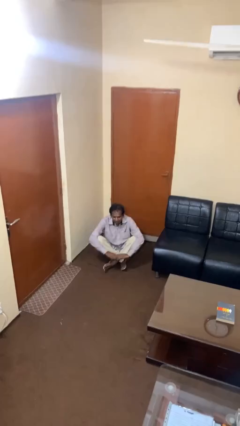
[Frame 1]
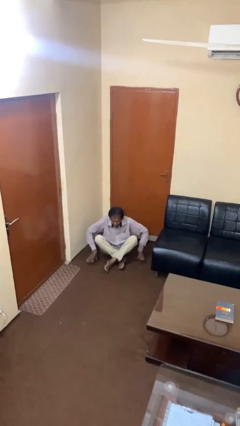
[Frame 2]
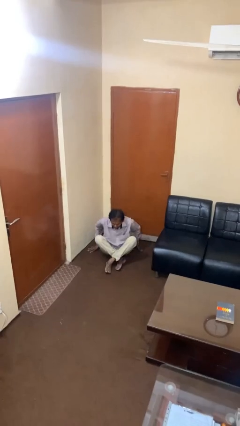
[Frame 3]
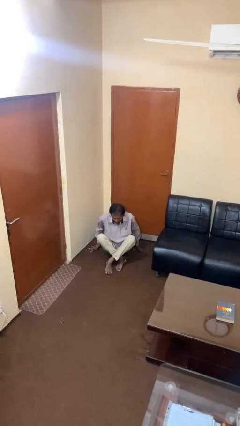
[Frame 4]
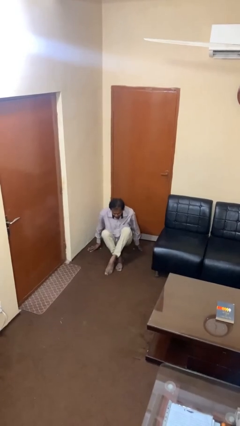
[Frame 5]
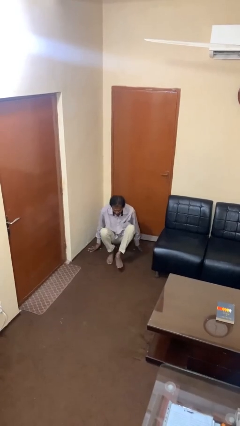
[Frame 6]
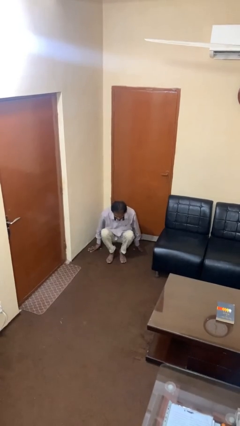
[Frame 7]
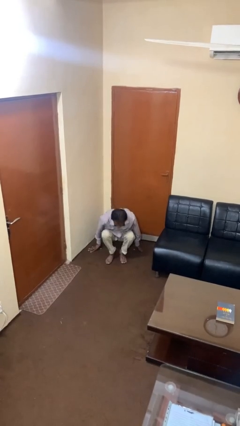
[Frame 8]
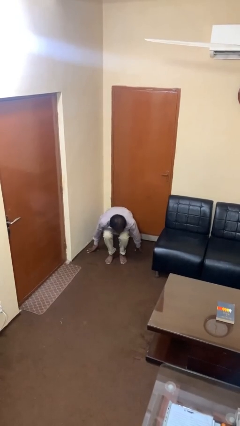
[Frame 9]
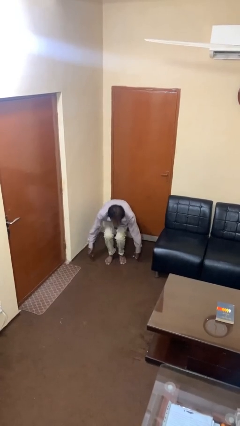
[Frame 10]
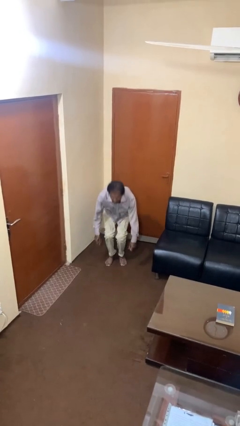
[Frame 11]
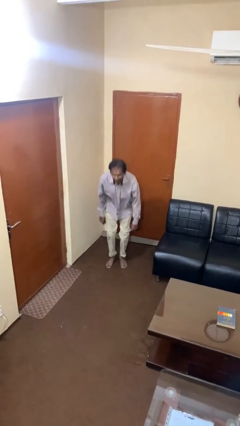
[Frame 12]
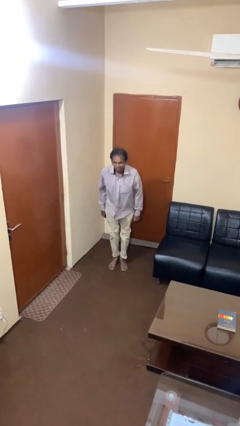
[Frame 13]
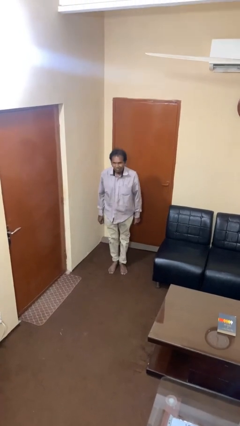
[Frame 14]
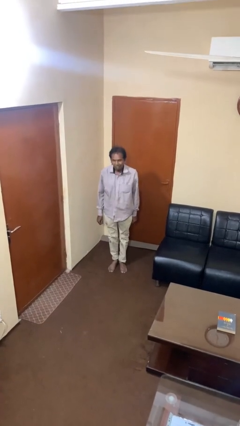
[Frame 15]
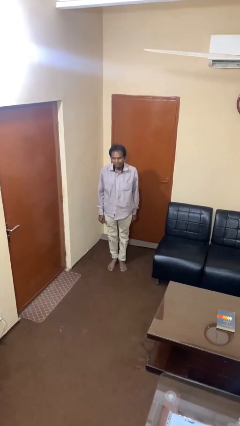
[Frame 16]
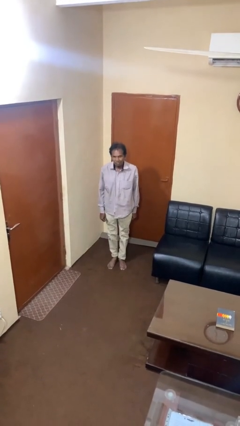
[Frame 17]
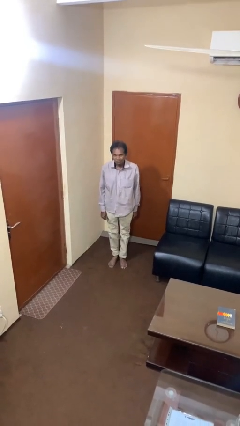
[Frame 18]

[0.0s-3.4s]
person stands up from floor

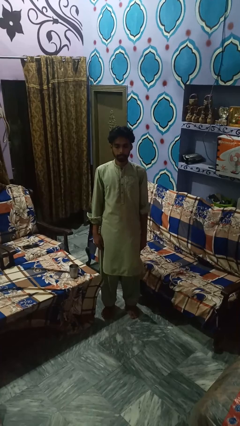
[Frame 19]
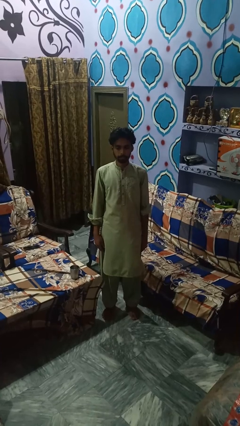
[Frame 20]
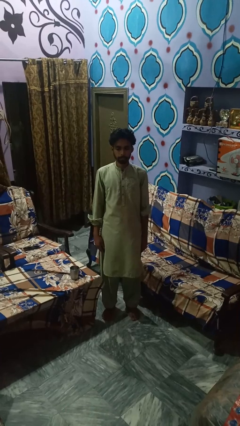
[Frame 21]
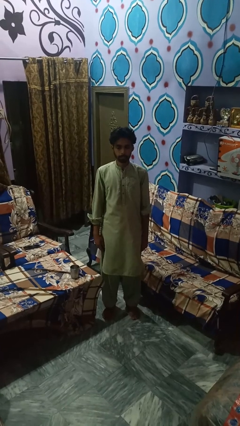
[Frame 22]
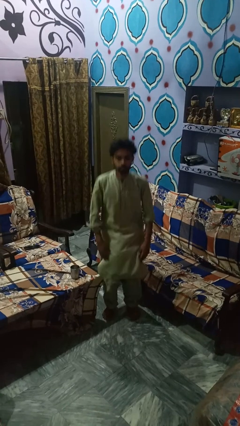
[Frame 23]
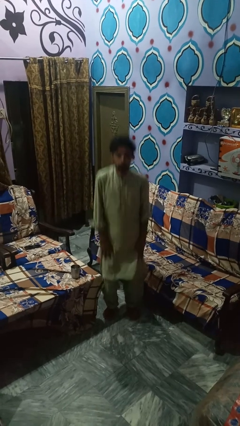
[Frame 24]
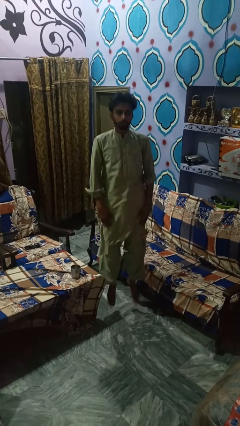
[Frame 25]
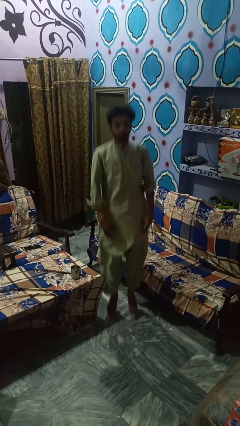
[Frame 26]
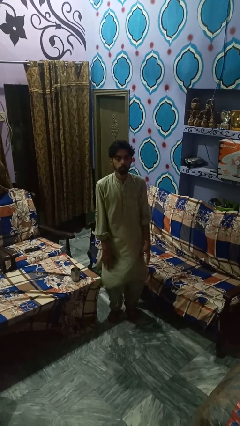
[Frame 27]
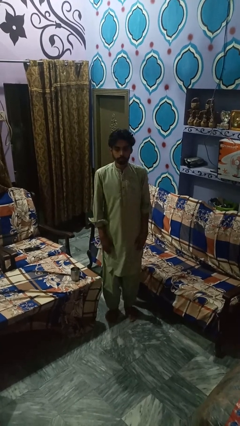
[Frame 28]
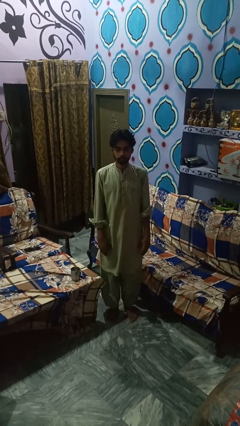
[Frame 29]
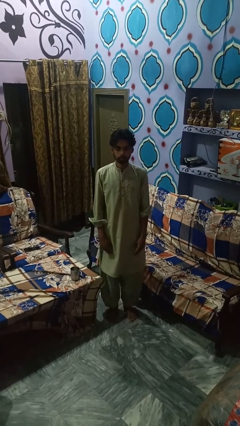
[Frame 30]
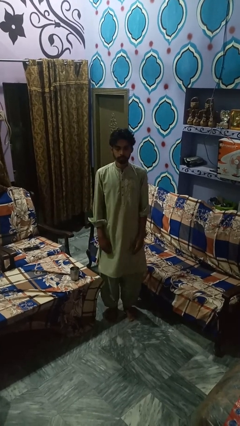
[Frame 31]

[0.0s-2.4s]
person jumps

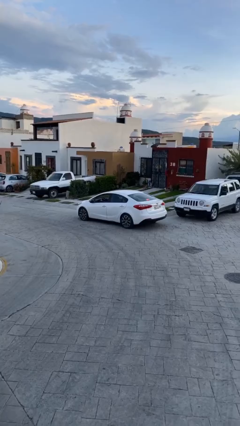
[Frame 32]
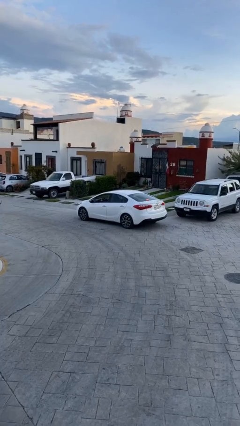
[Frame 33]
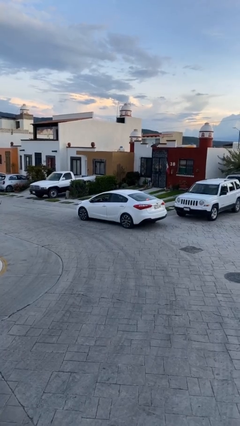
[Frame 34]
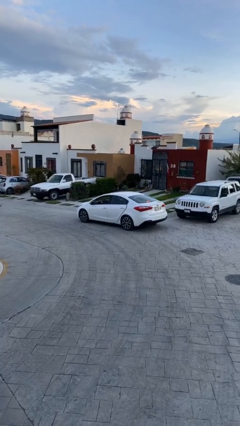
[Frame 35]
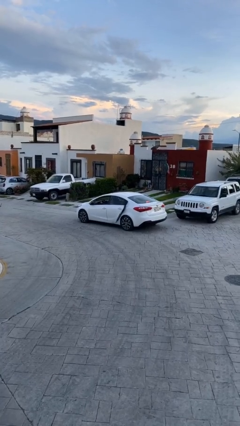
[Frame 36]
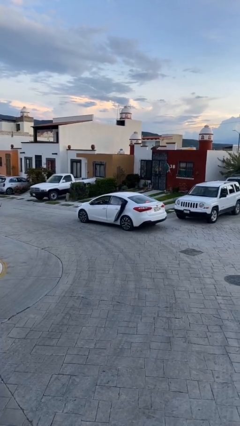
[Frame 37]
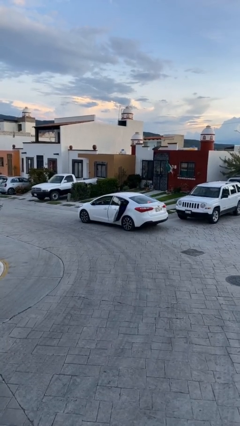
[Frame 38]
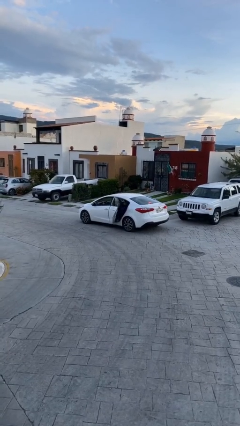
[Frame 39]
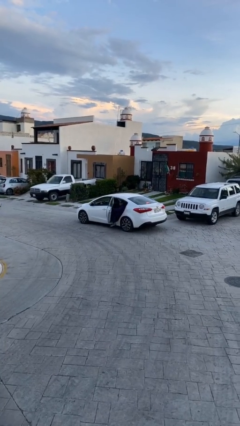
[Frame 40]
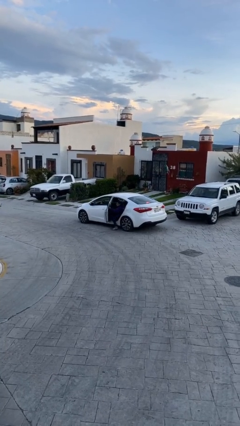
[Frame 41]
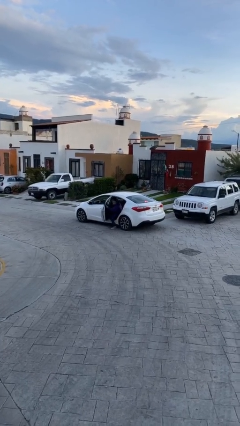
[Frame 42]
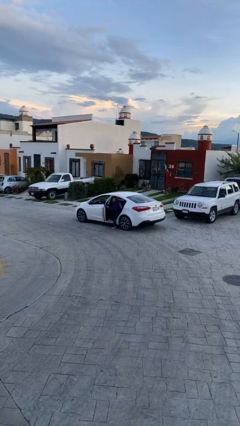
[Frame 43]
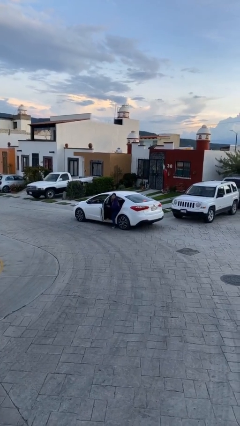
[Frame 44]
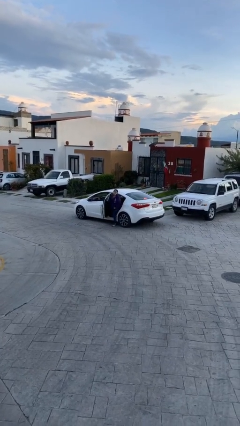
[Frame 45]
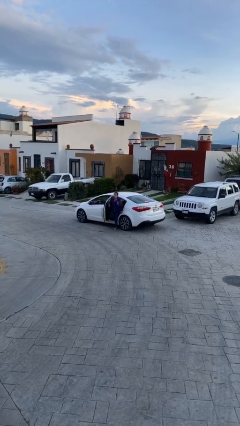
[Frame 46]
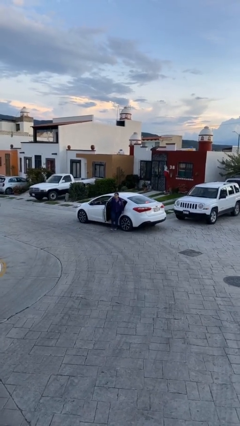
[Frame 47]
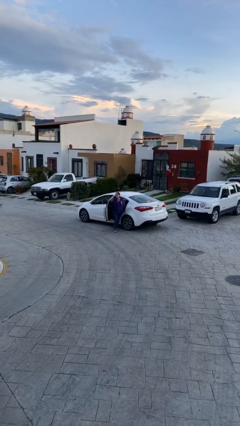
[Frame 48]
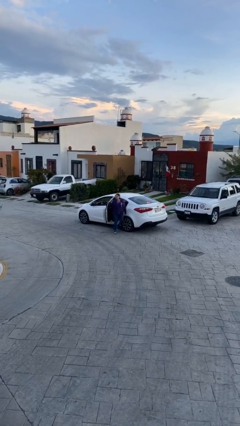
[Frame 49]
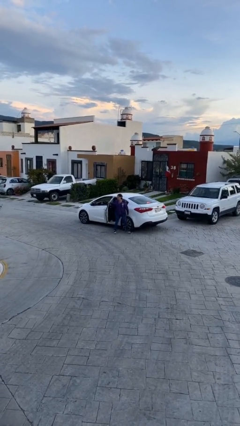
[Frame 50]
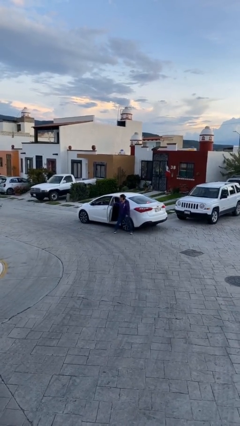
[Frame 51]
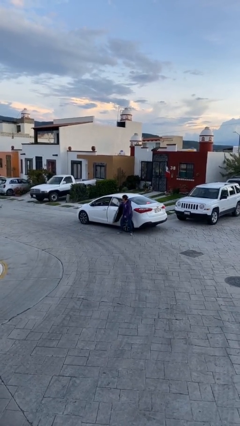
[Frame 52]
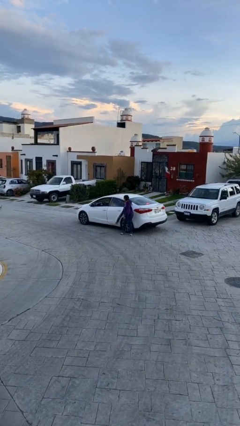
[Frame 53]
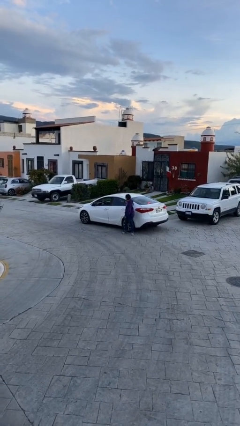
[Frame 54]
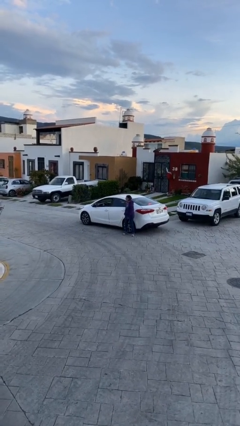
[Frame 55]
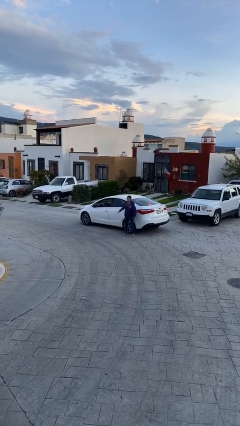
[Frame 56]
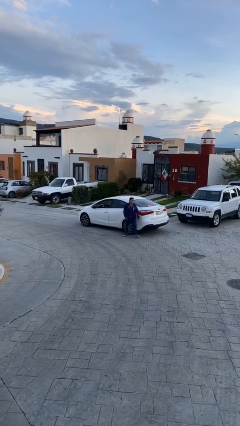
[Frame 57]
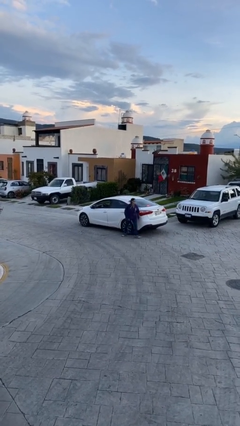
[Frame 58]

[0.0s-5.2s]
car drops off person

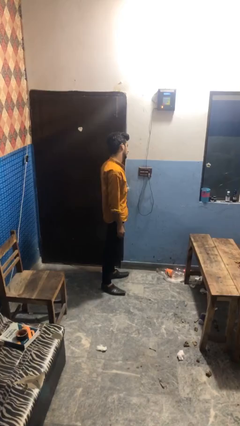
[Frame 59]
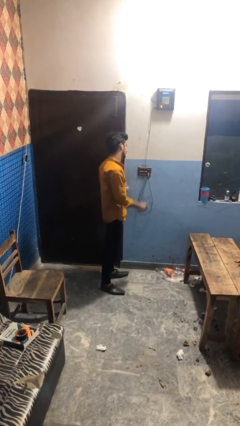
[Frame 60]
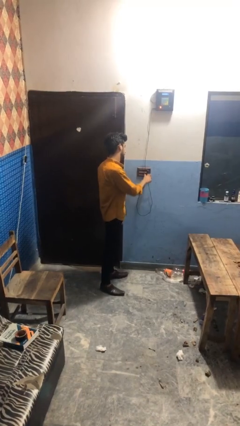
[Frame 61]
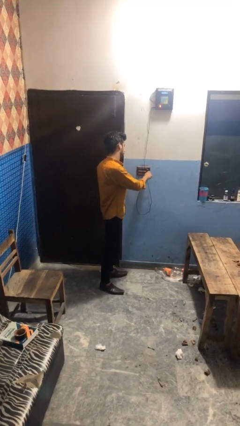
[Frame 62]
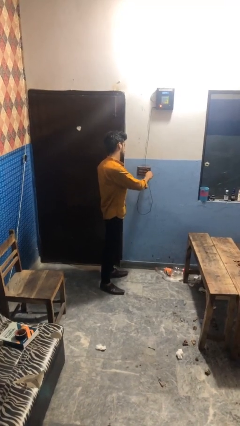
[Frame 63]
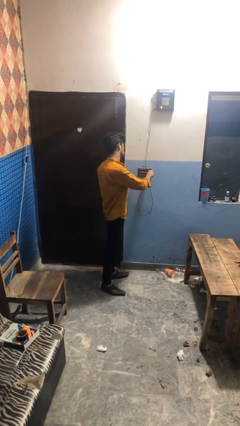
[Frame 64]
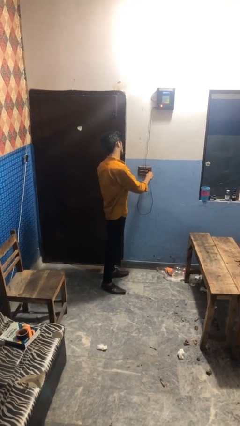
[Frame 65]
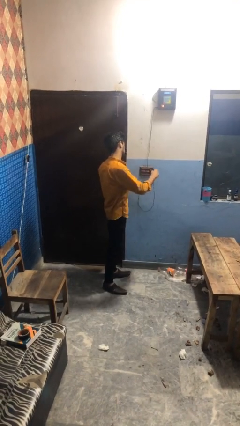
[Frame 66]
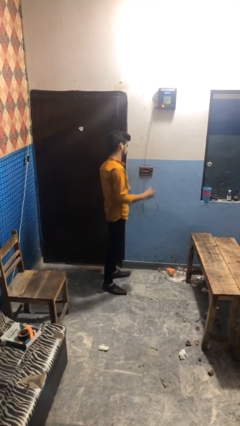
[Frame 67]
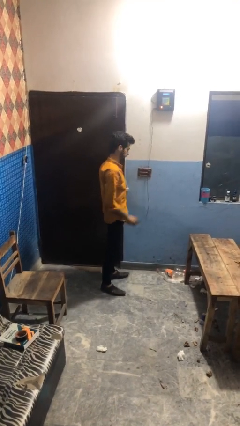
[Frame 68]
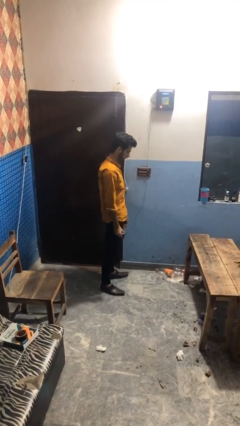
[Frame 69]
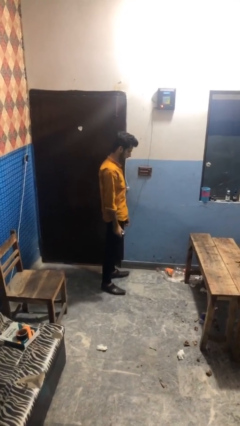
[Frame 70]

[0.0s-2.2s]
person unplugs from electrical socket

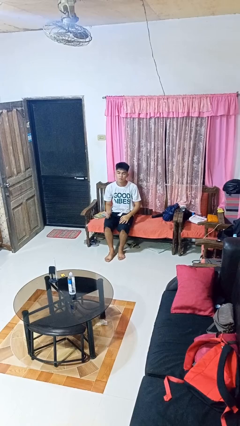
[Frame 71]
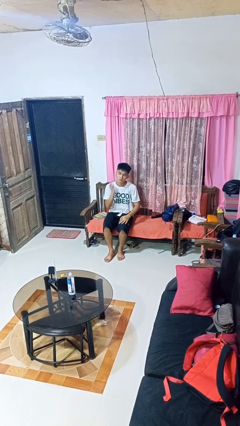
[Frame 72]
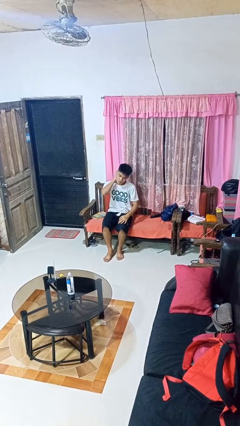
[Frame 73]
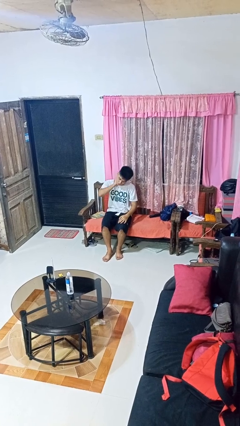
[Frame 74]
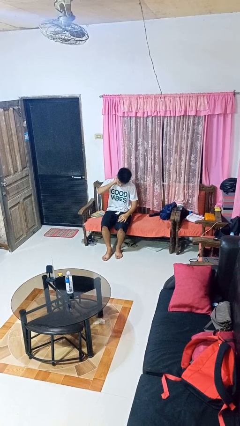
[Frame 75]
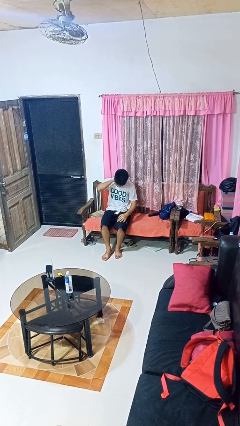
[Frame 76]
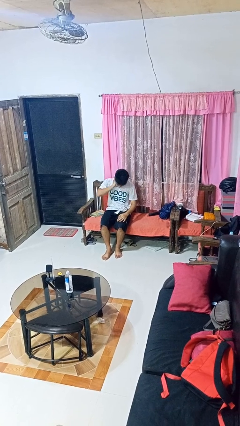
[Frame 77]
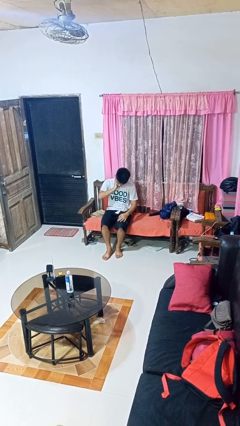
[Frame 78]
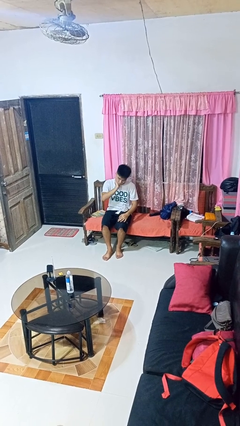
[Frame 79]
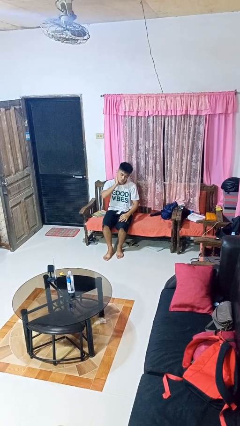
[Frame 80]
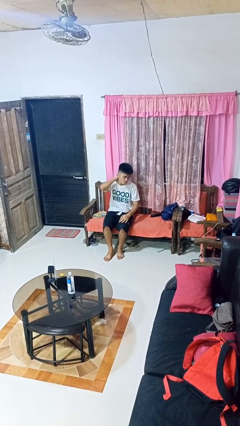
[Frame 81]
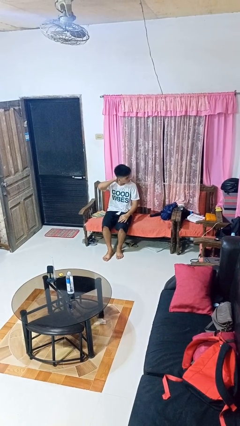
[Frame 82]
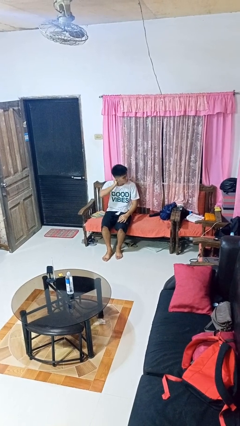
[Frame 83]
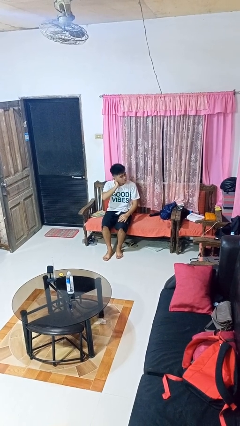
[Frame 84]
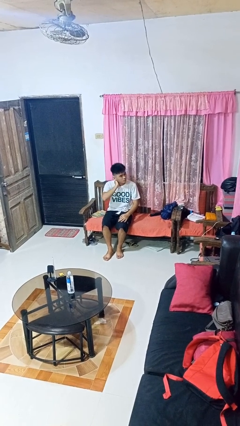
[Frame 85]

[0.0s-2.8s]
person rubs neck

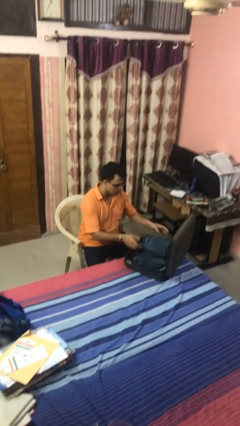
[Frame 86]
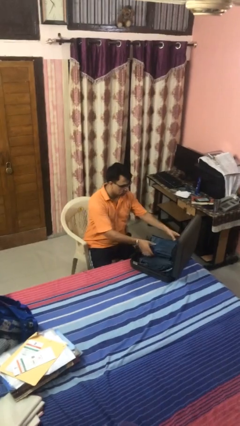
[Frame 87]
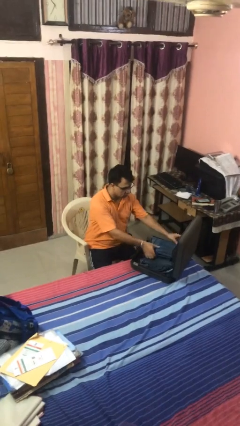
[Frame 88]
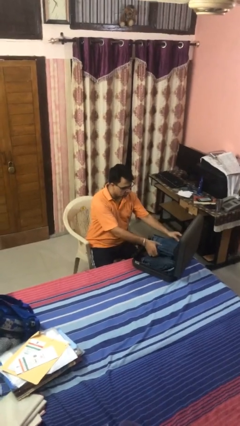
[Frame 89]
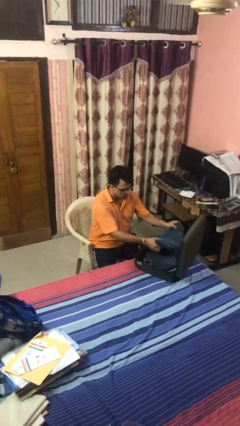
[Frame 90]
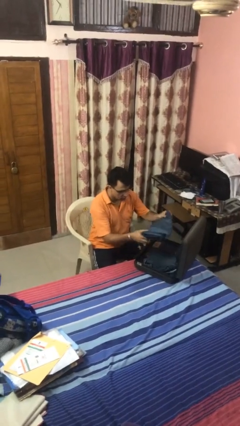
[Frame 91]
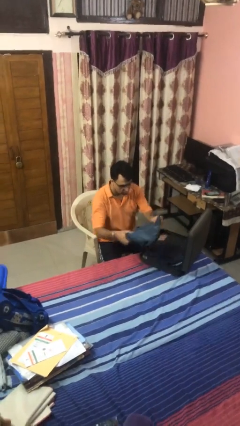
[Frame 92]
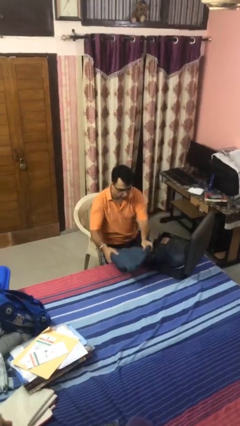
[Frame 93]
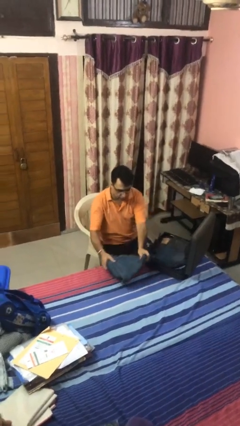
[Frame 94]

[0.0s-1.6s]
person unloads clothes from suitcase

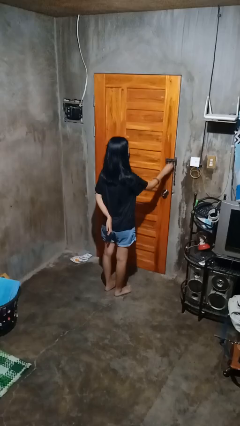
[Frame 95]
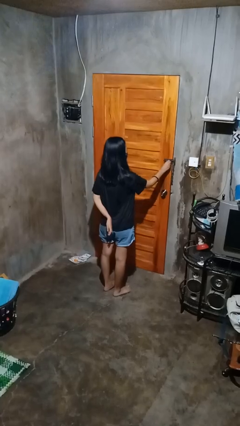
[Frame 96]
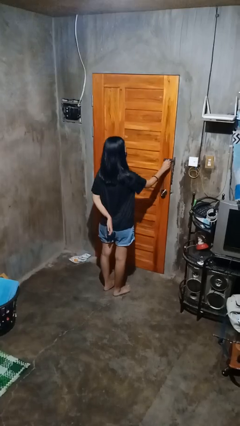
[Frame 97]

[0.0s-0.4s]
person unlocks door with keys
